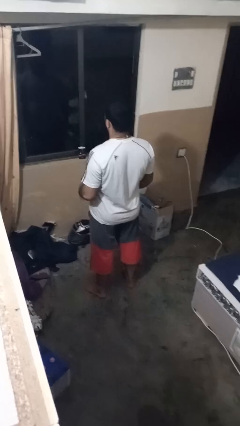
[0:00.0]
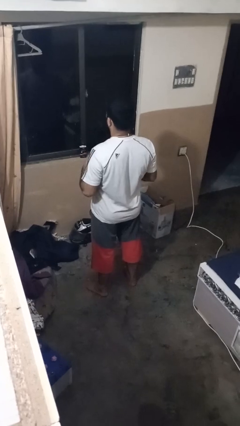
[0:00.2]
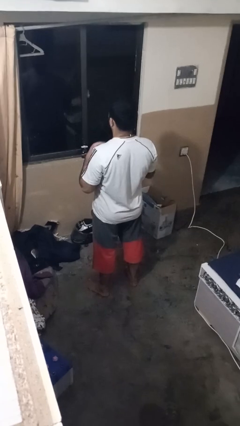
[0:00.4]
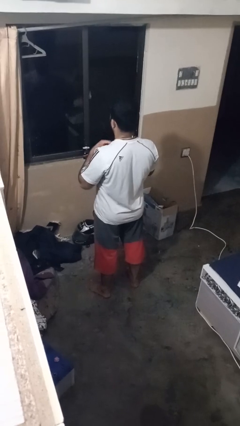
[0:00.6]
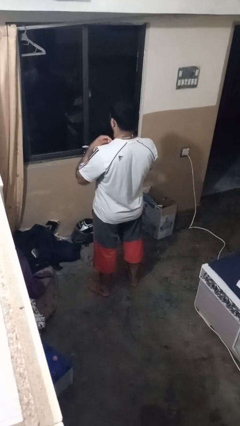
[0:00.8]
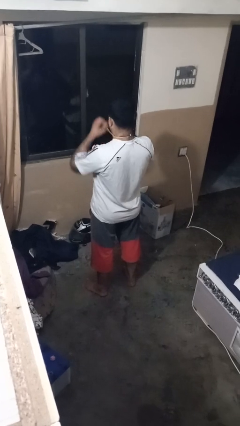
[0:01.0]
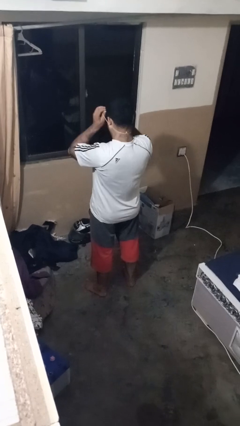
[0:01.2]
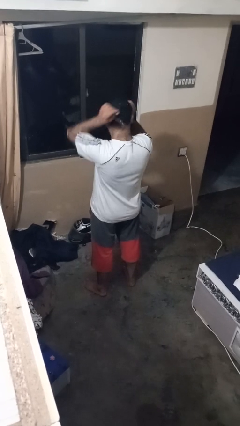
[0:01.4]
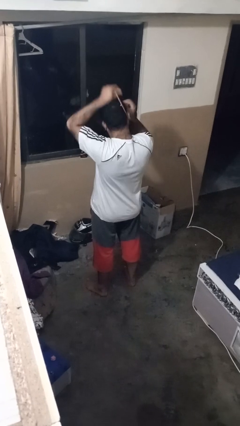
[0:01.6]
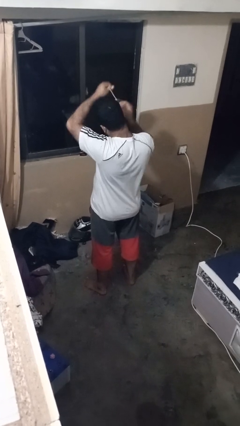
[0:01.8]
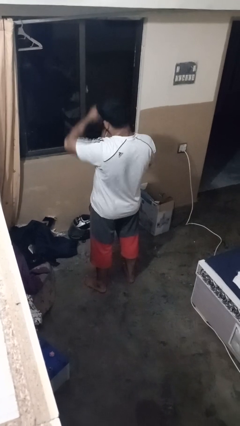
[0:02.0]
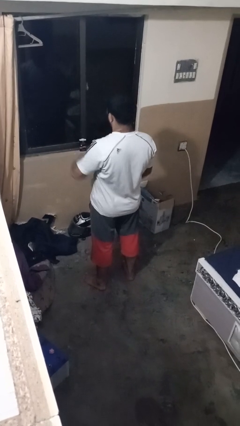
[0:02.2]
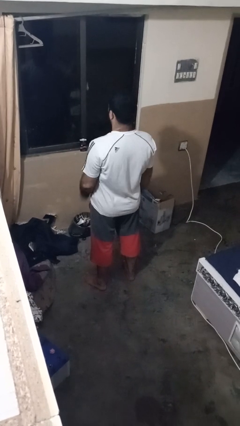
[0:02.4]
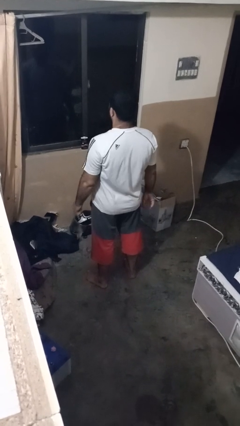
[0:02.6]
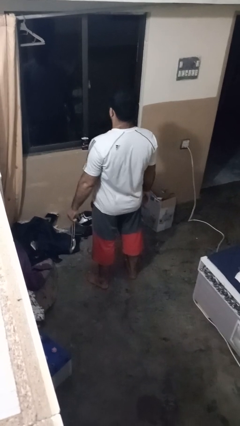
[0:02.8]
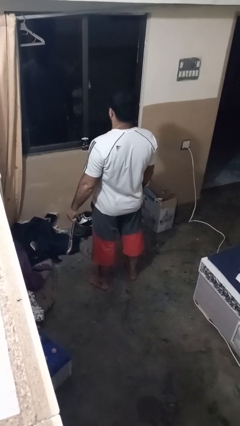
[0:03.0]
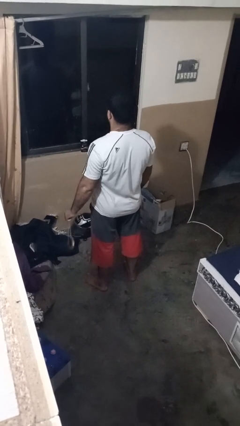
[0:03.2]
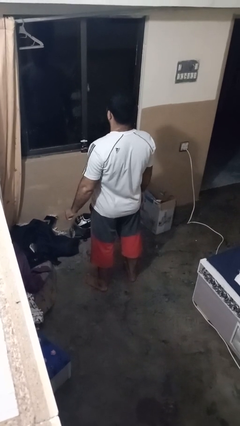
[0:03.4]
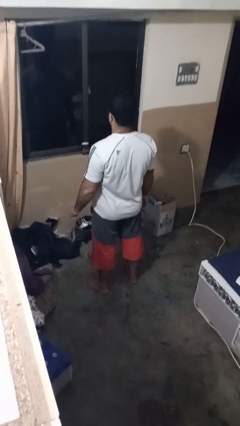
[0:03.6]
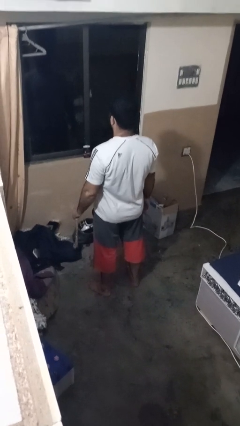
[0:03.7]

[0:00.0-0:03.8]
person takes off necklace

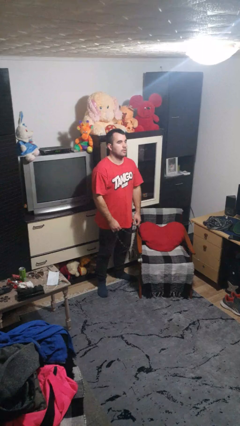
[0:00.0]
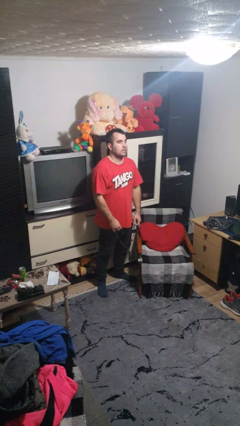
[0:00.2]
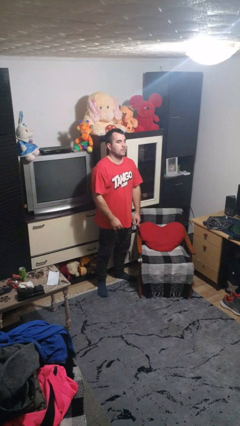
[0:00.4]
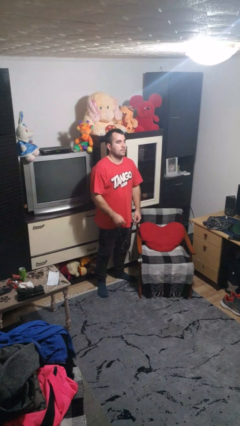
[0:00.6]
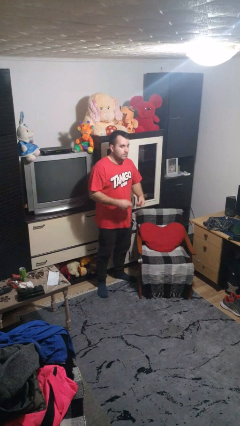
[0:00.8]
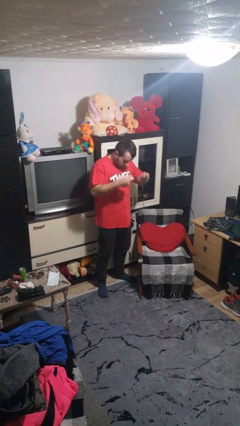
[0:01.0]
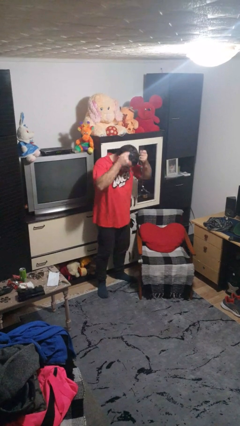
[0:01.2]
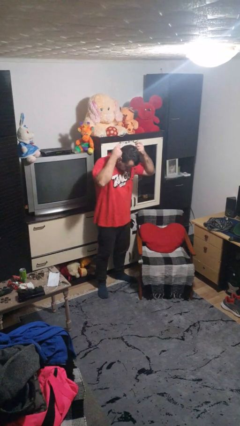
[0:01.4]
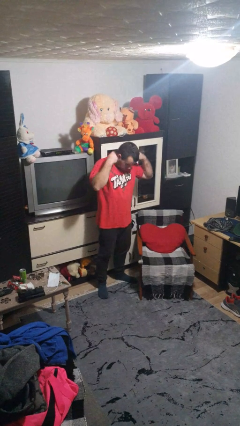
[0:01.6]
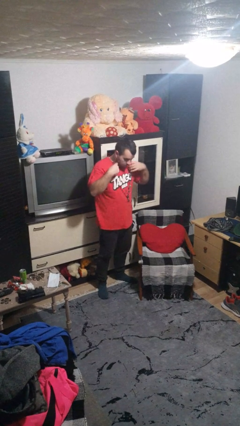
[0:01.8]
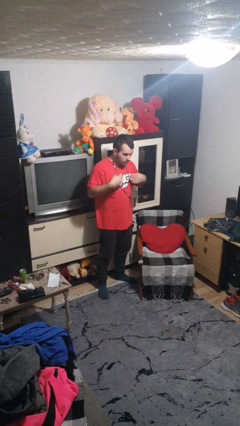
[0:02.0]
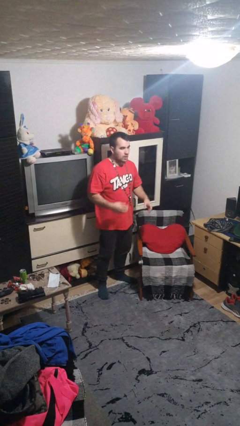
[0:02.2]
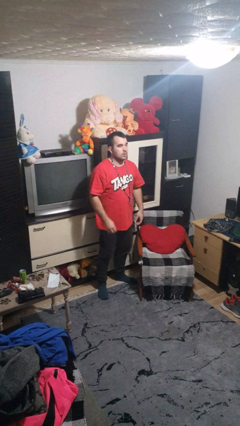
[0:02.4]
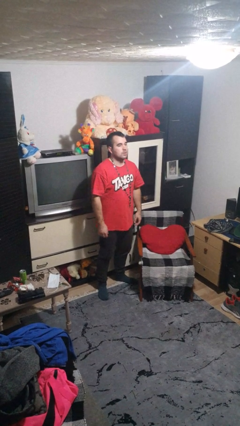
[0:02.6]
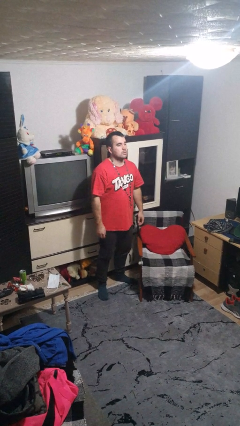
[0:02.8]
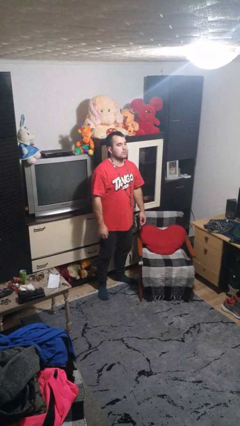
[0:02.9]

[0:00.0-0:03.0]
person puts on necklace

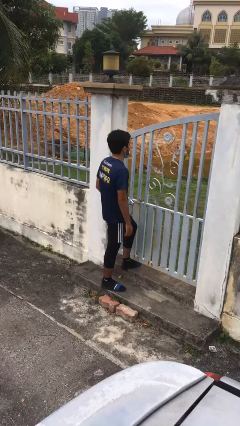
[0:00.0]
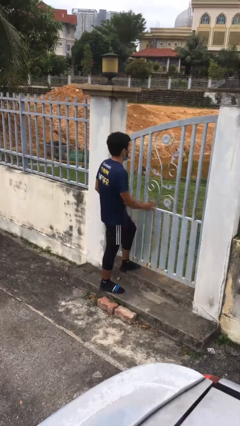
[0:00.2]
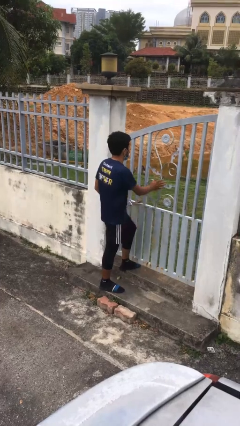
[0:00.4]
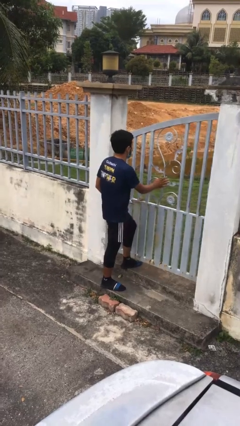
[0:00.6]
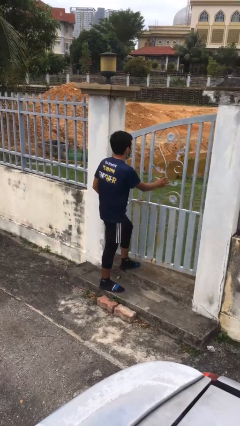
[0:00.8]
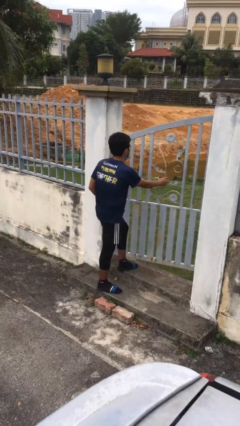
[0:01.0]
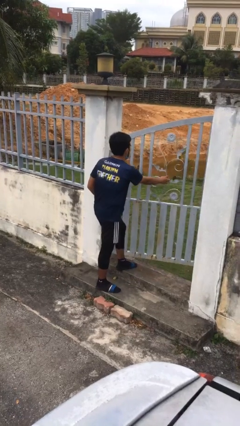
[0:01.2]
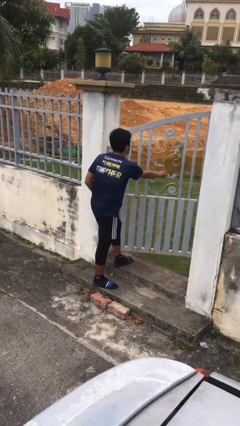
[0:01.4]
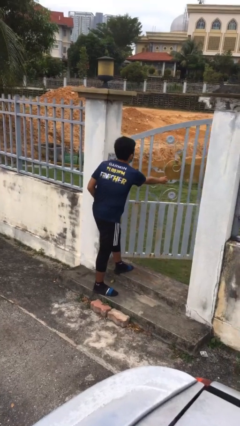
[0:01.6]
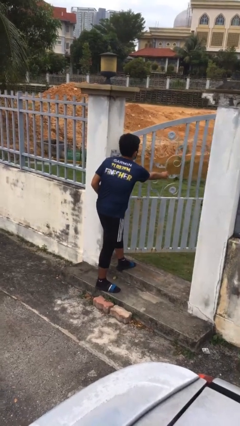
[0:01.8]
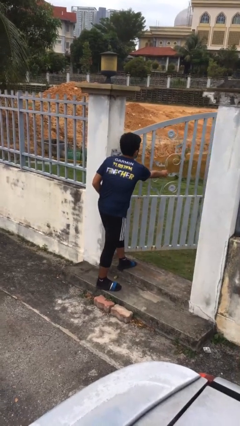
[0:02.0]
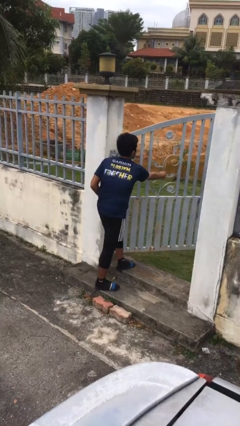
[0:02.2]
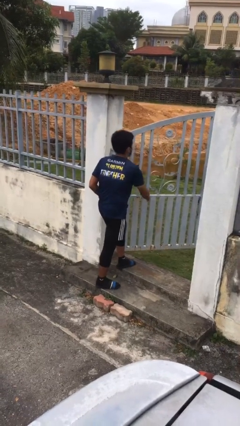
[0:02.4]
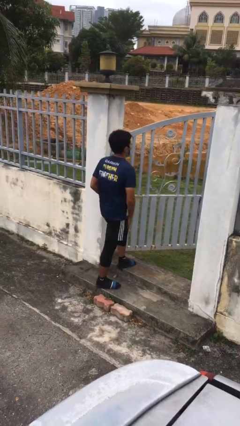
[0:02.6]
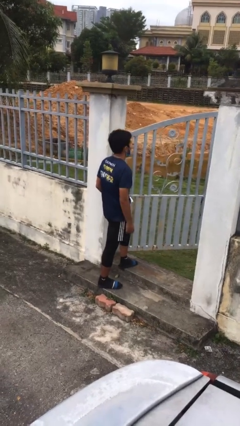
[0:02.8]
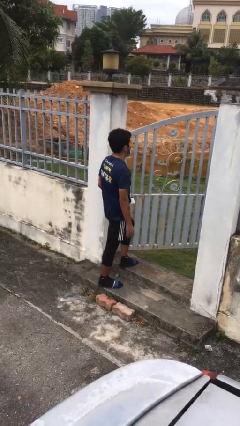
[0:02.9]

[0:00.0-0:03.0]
person opens facility door

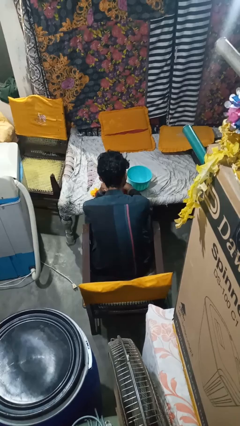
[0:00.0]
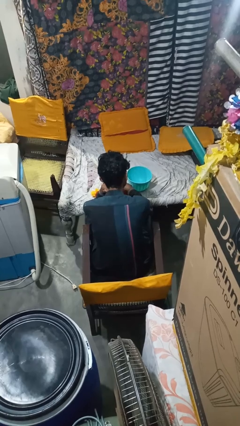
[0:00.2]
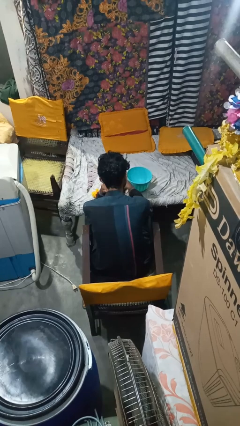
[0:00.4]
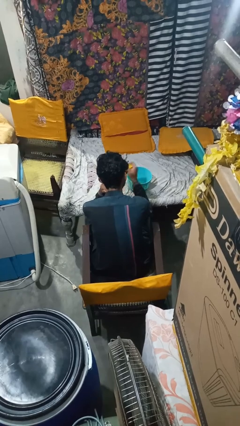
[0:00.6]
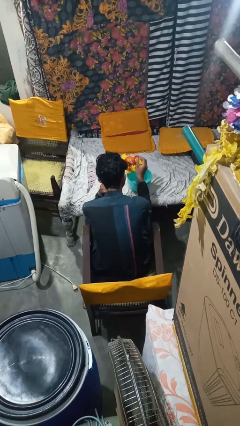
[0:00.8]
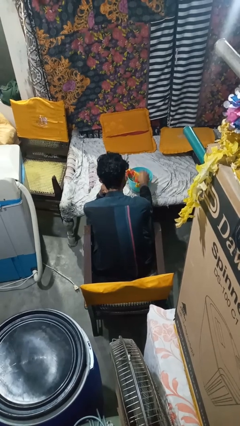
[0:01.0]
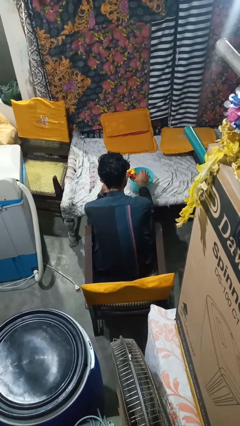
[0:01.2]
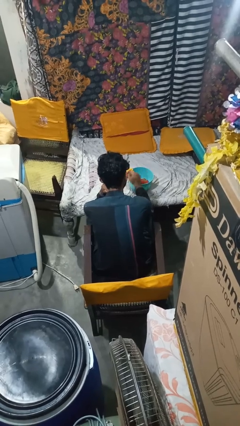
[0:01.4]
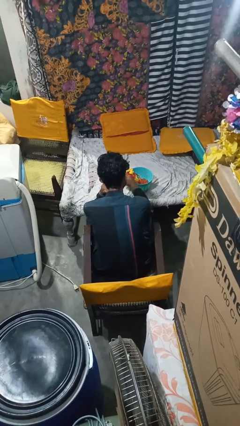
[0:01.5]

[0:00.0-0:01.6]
person pours into bowl

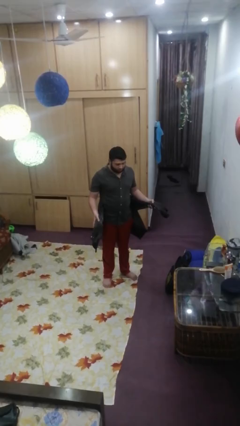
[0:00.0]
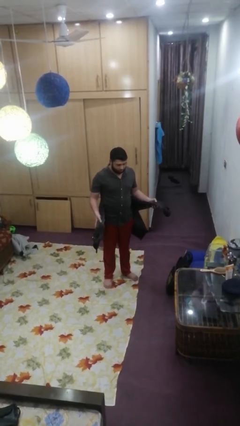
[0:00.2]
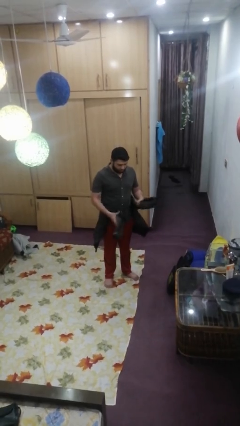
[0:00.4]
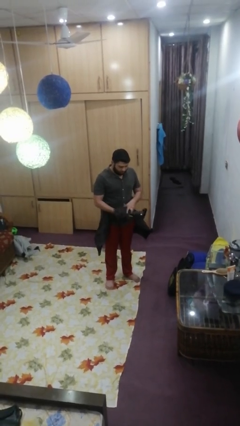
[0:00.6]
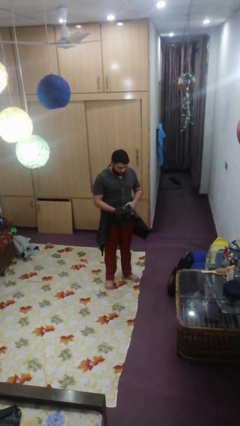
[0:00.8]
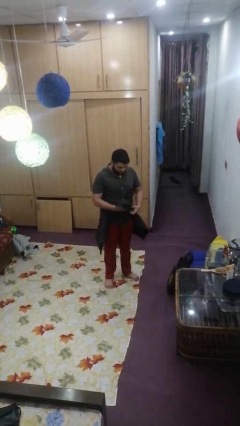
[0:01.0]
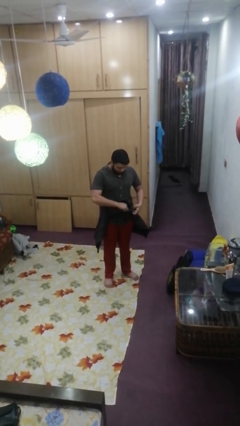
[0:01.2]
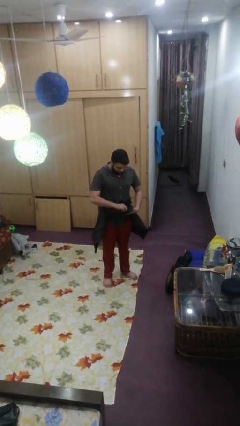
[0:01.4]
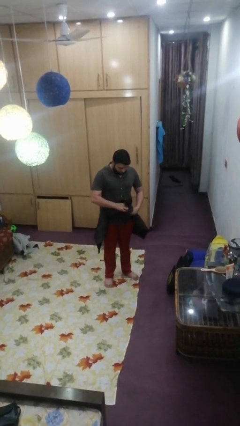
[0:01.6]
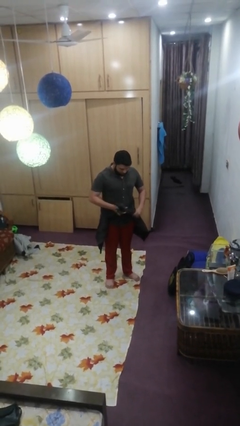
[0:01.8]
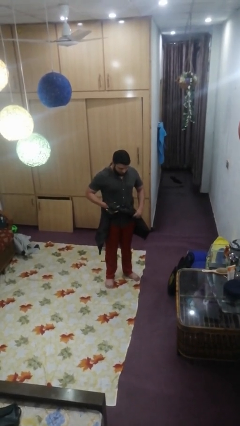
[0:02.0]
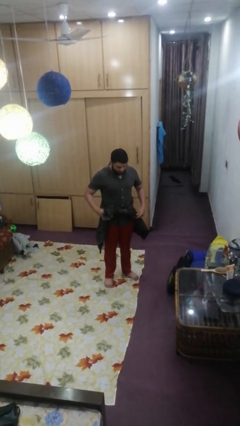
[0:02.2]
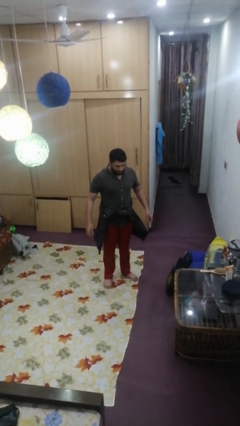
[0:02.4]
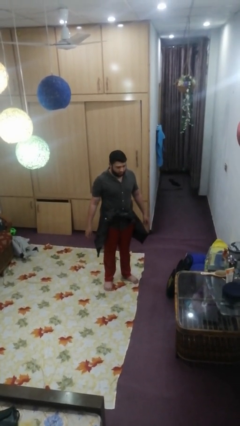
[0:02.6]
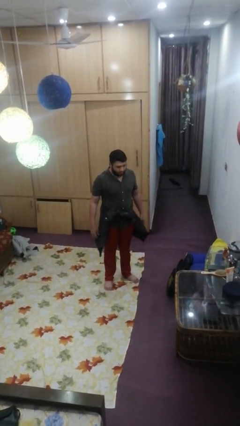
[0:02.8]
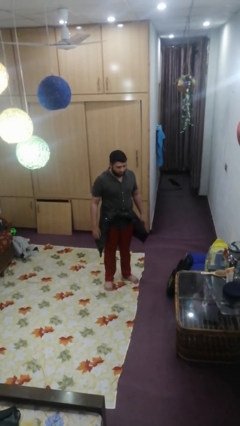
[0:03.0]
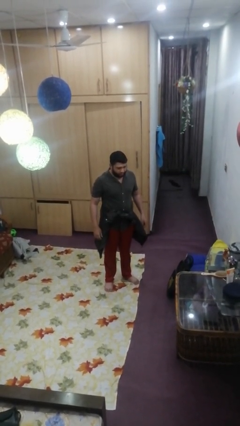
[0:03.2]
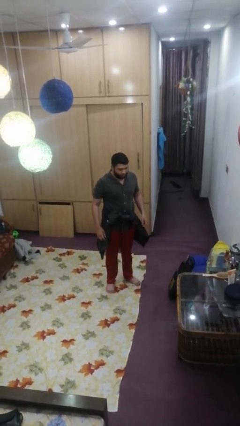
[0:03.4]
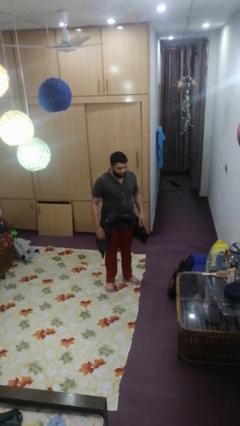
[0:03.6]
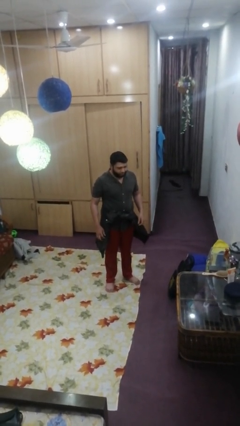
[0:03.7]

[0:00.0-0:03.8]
person ties jacket around waist

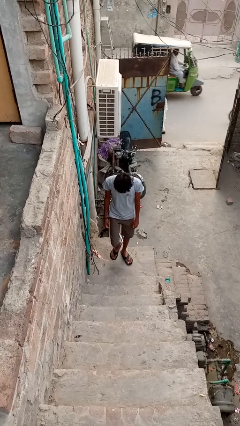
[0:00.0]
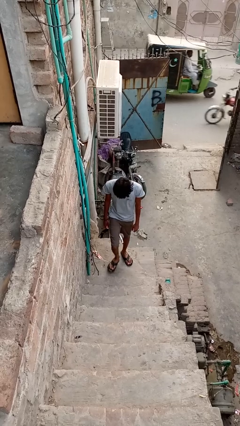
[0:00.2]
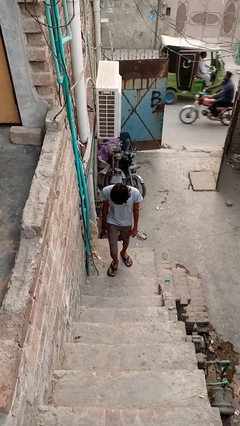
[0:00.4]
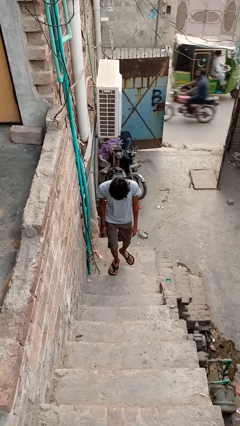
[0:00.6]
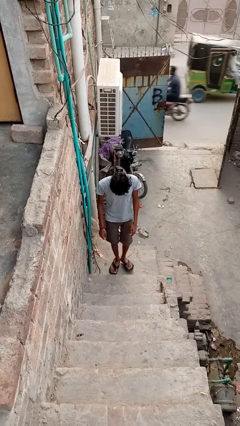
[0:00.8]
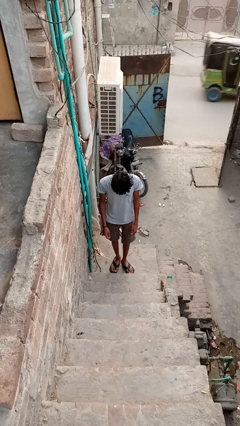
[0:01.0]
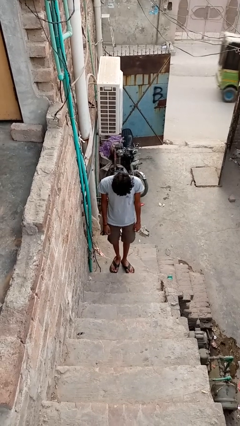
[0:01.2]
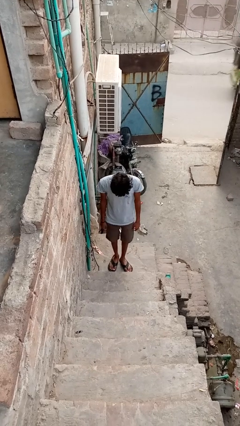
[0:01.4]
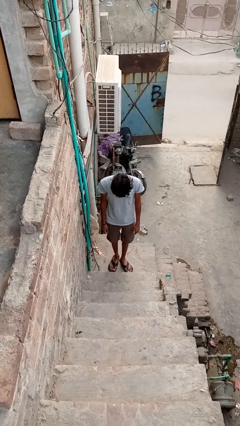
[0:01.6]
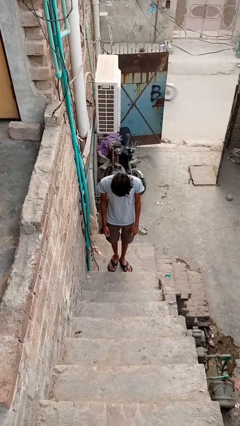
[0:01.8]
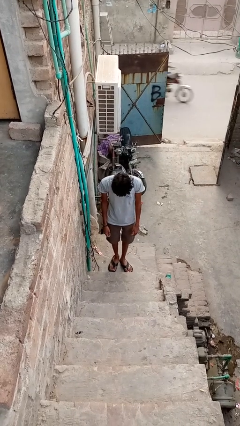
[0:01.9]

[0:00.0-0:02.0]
person climbs up stairs

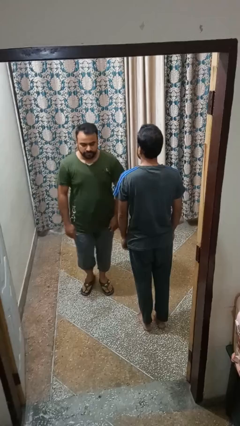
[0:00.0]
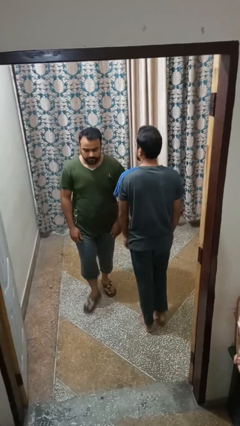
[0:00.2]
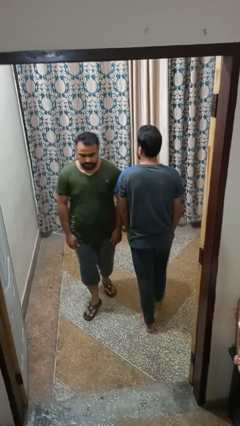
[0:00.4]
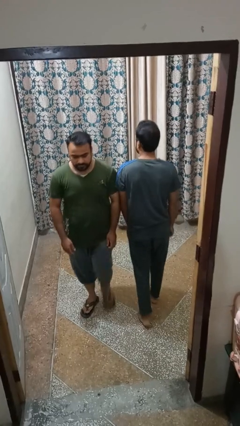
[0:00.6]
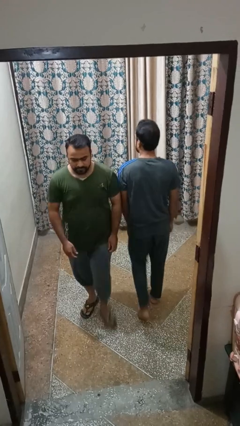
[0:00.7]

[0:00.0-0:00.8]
person bumps into person
